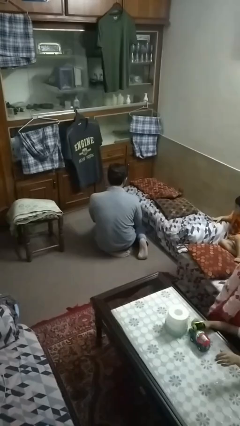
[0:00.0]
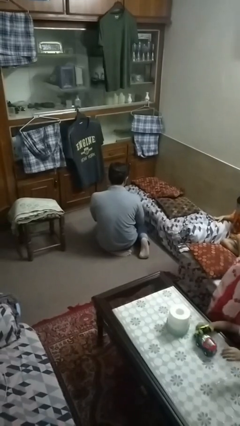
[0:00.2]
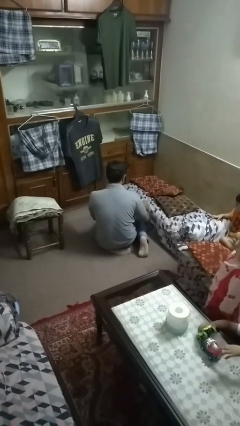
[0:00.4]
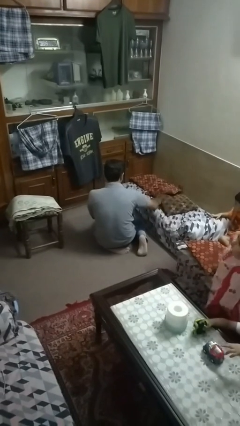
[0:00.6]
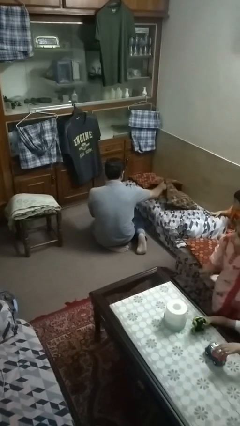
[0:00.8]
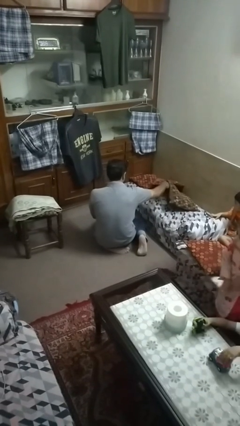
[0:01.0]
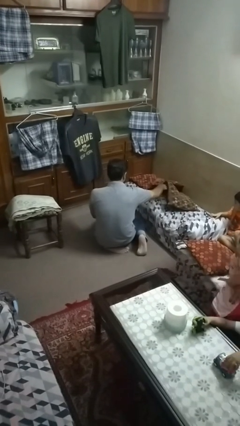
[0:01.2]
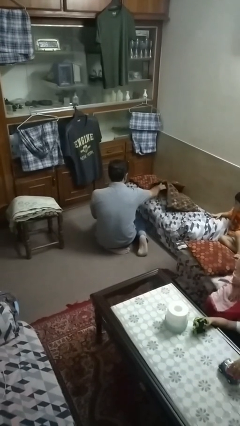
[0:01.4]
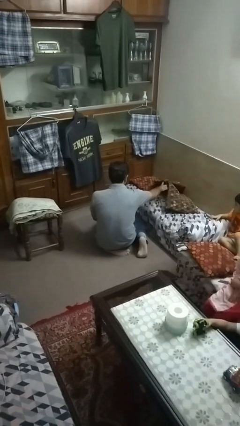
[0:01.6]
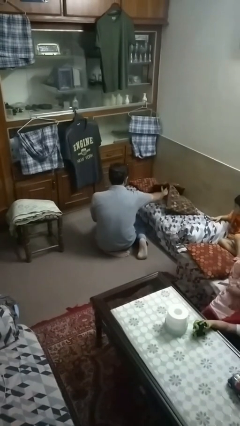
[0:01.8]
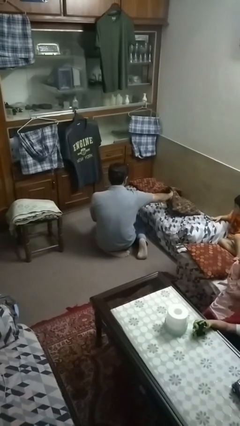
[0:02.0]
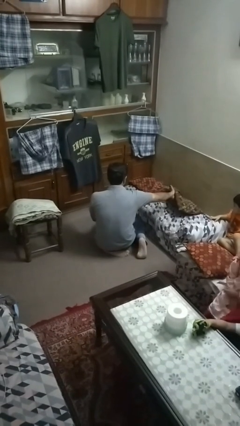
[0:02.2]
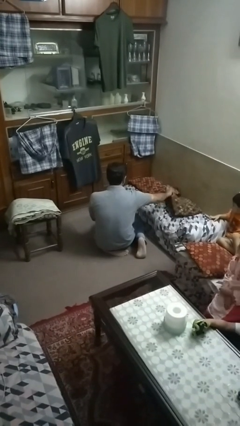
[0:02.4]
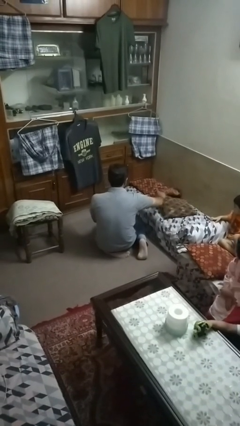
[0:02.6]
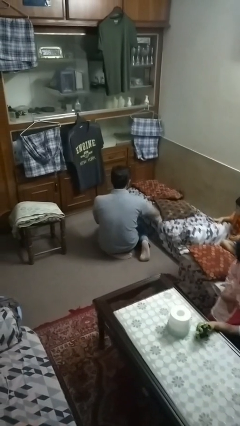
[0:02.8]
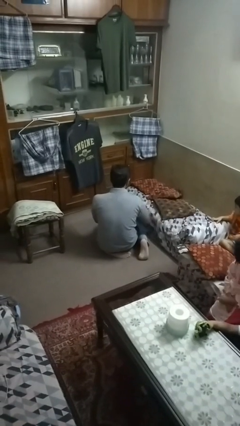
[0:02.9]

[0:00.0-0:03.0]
person searches in couch

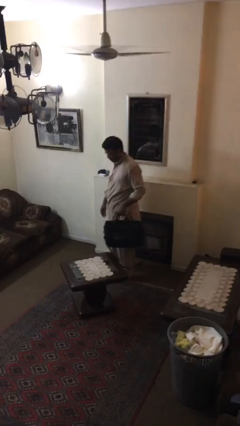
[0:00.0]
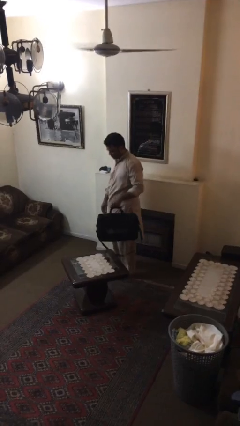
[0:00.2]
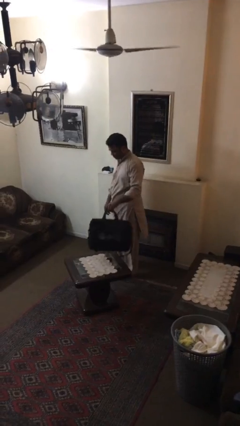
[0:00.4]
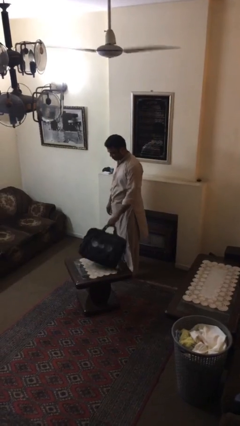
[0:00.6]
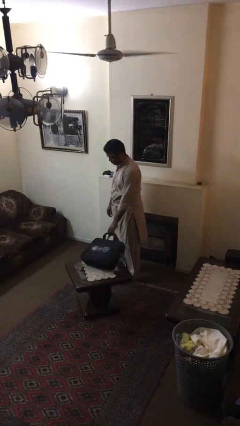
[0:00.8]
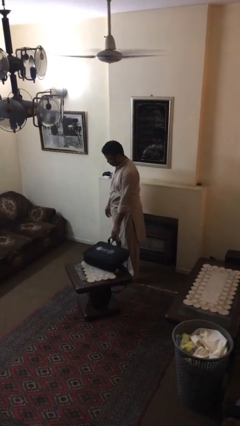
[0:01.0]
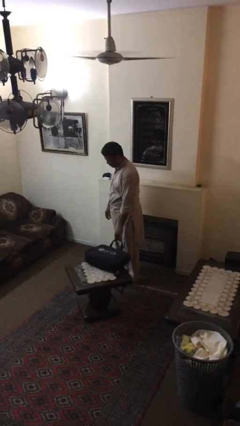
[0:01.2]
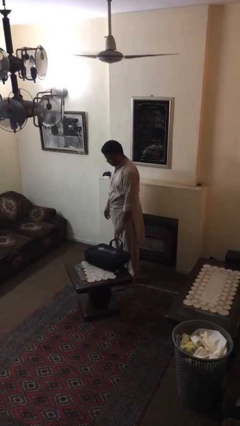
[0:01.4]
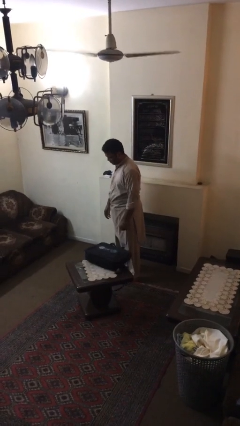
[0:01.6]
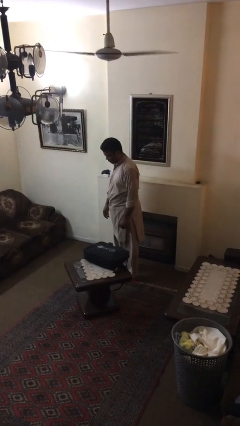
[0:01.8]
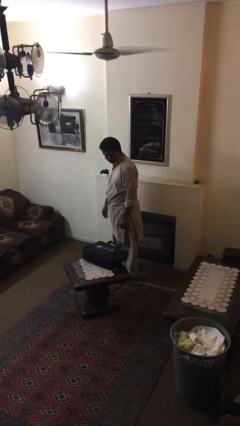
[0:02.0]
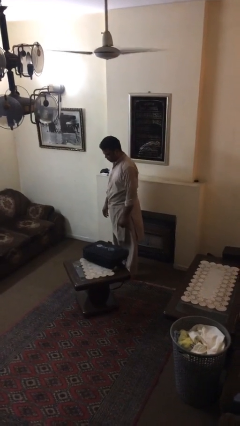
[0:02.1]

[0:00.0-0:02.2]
person puts down object on table

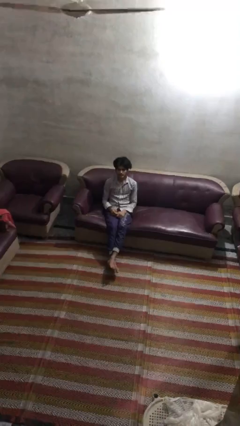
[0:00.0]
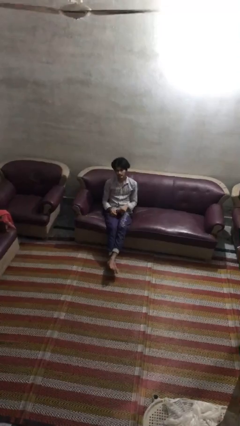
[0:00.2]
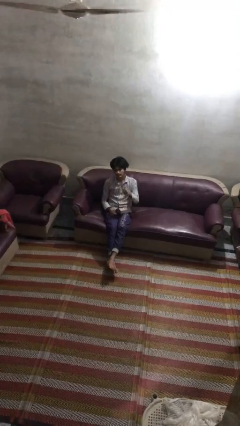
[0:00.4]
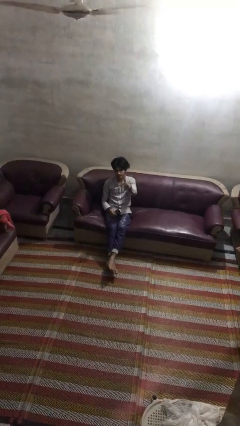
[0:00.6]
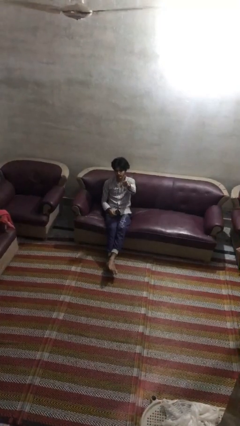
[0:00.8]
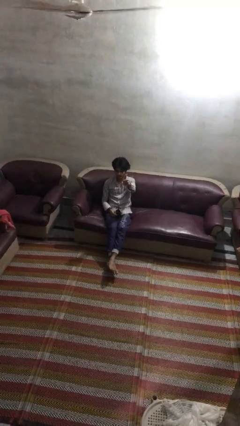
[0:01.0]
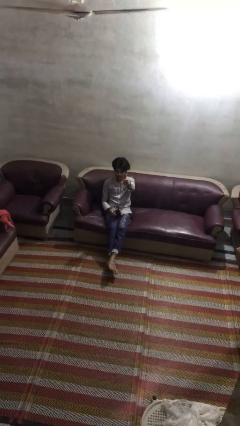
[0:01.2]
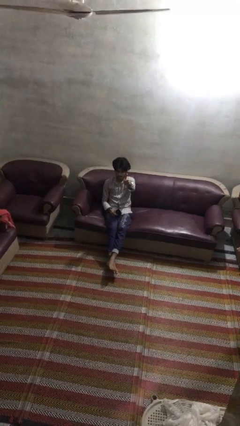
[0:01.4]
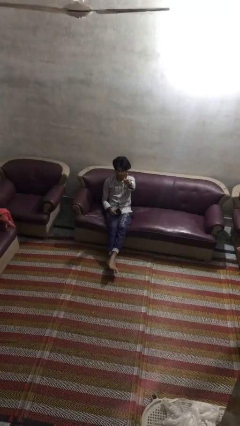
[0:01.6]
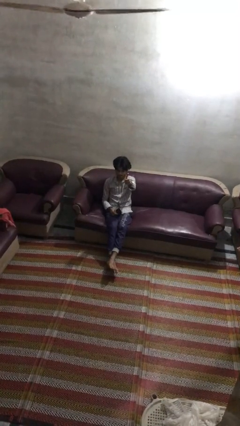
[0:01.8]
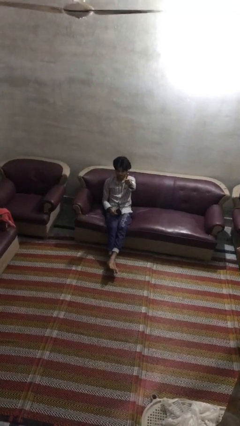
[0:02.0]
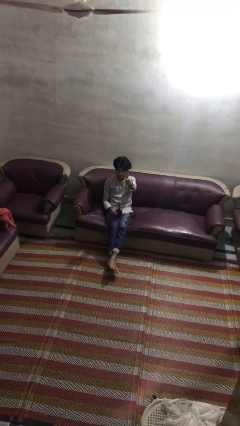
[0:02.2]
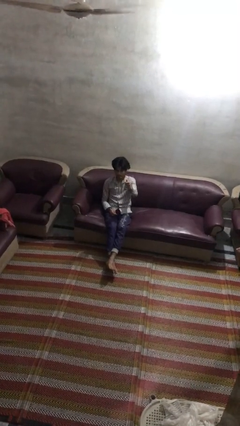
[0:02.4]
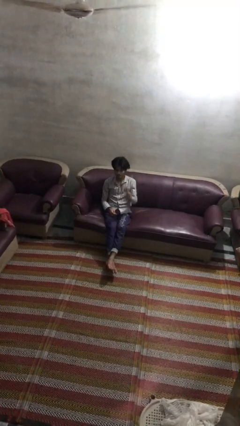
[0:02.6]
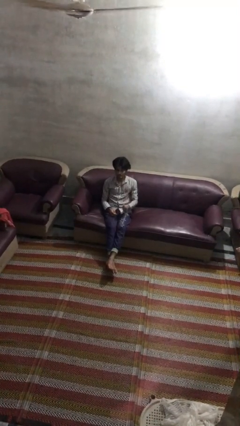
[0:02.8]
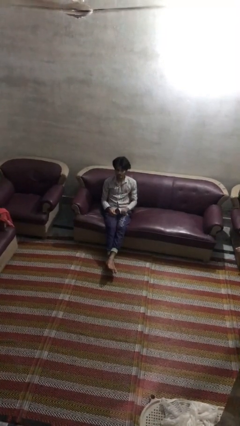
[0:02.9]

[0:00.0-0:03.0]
person gestures thumbs up

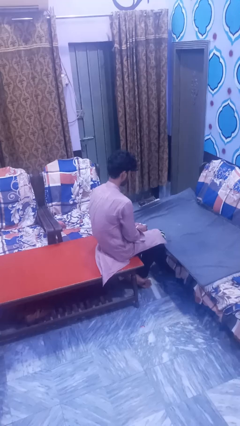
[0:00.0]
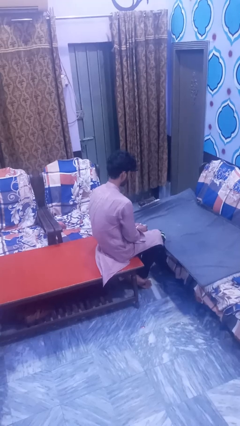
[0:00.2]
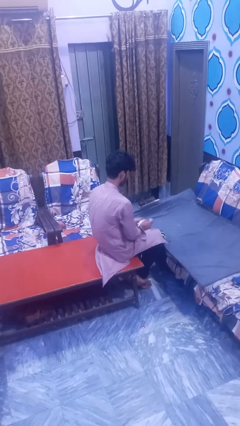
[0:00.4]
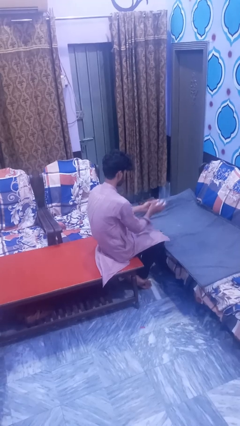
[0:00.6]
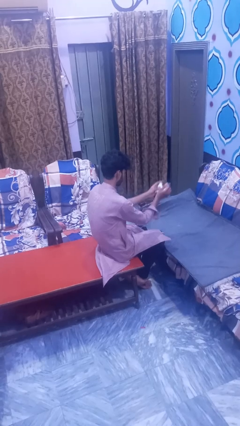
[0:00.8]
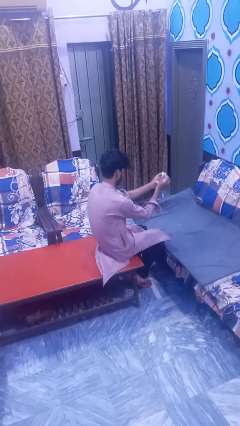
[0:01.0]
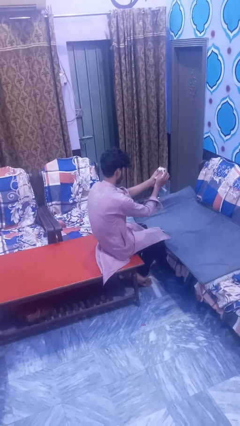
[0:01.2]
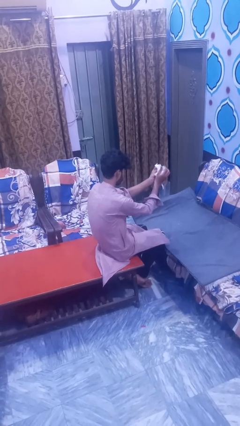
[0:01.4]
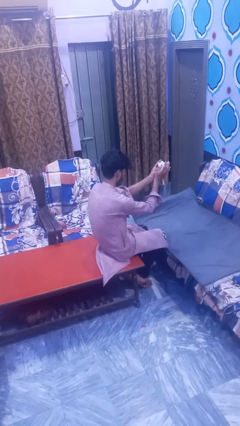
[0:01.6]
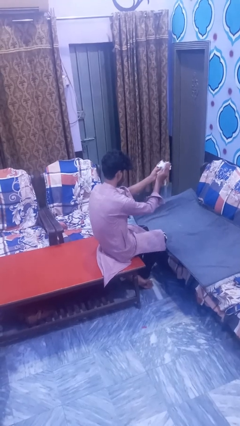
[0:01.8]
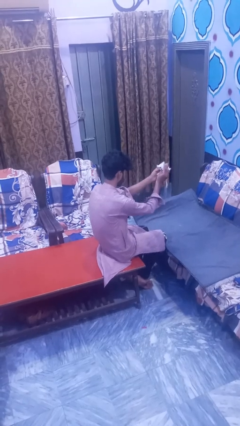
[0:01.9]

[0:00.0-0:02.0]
person crumples paper

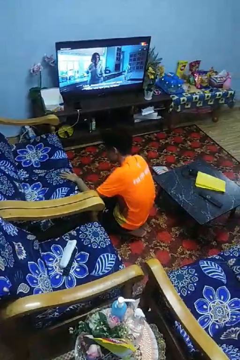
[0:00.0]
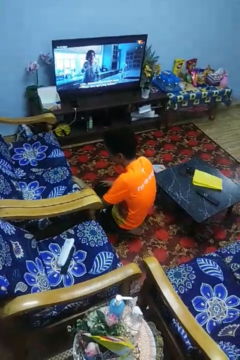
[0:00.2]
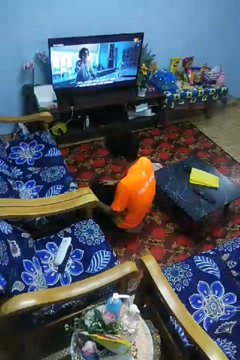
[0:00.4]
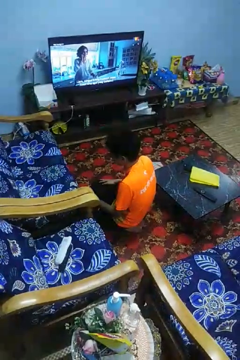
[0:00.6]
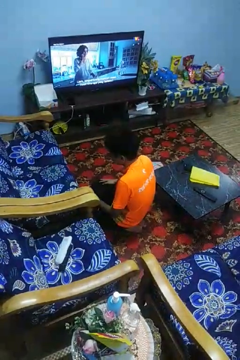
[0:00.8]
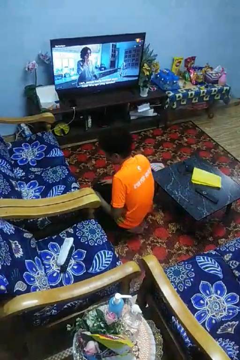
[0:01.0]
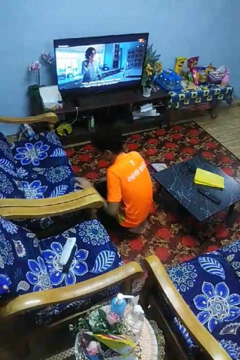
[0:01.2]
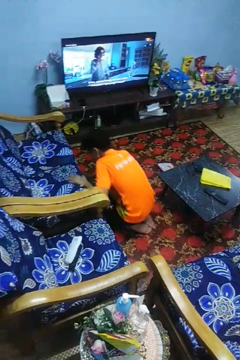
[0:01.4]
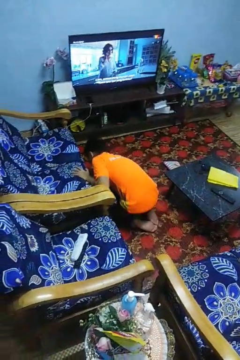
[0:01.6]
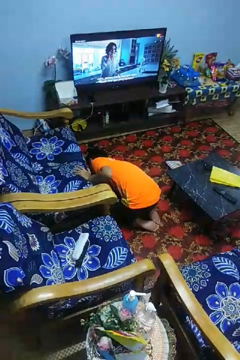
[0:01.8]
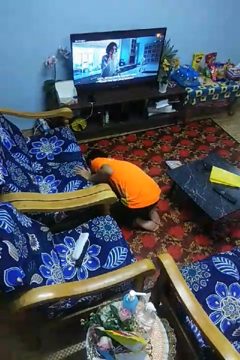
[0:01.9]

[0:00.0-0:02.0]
person searches under couch

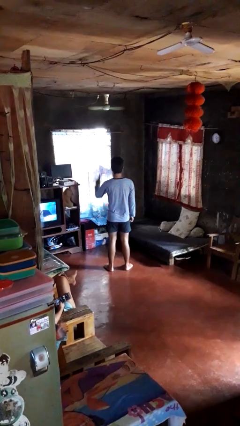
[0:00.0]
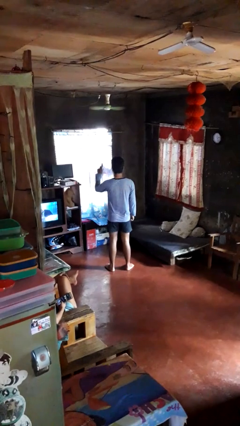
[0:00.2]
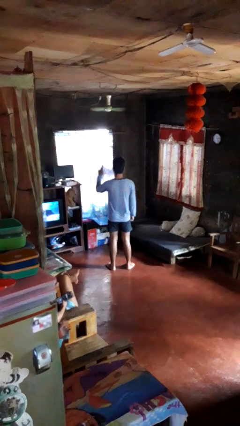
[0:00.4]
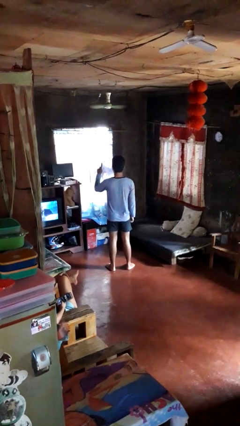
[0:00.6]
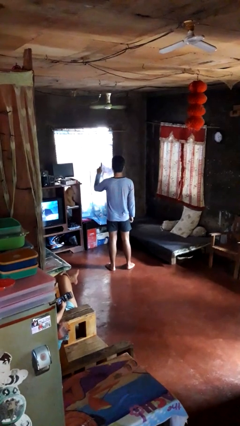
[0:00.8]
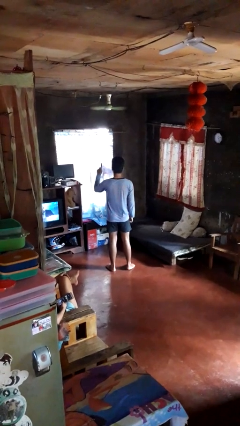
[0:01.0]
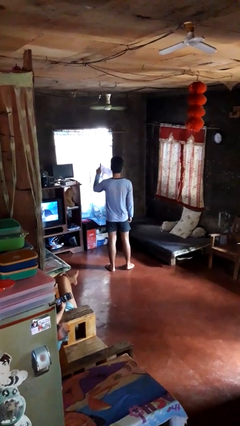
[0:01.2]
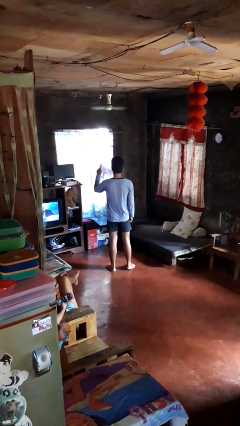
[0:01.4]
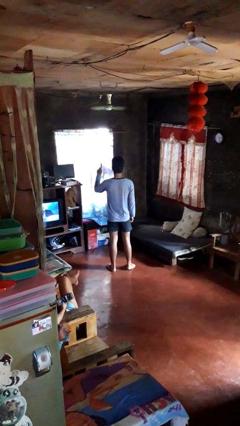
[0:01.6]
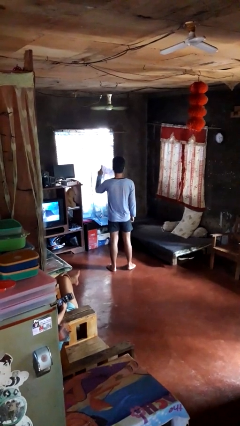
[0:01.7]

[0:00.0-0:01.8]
person gestures number one

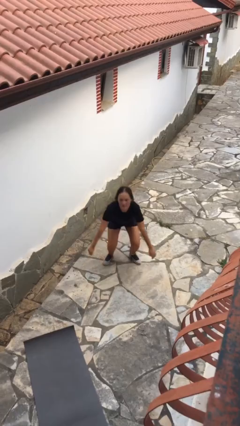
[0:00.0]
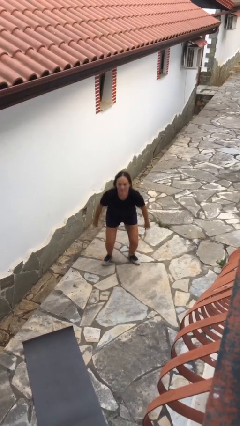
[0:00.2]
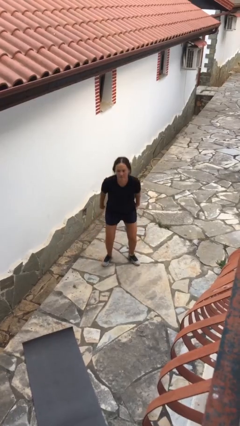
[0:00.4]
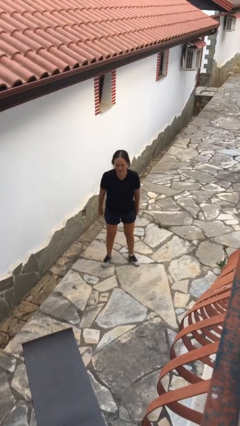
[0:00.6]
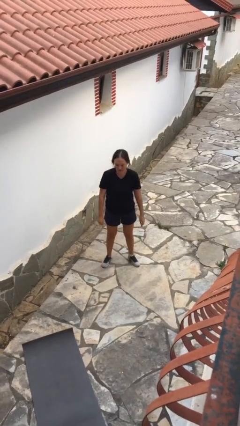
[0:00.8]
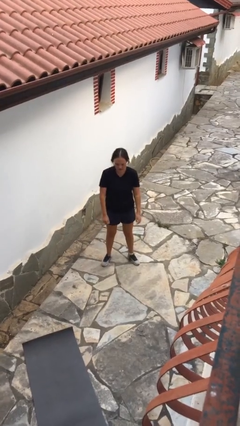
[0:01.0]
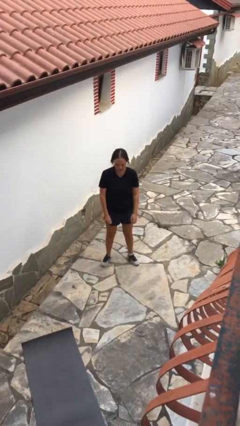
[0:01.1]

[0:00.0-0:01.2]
person stands up

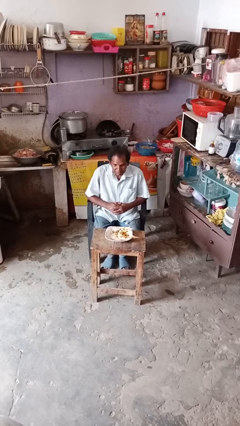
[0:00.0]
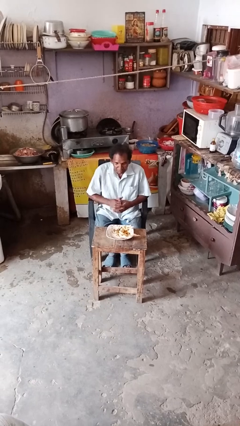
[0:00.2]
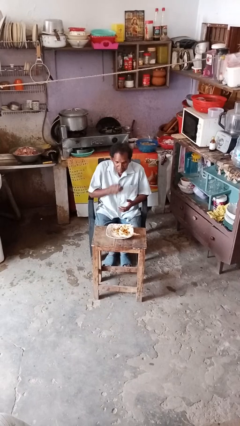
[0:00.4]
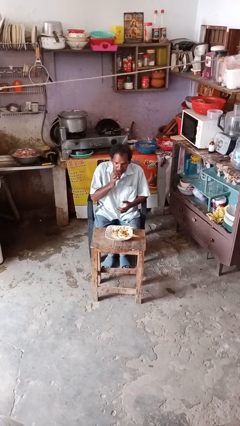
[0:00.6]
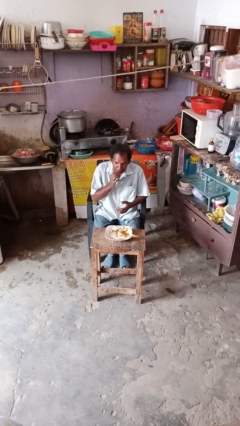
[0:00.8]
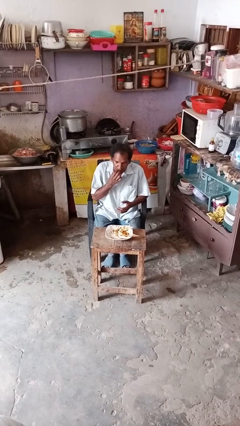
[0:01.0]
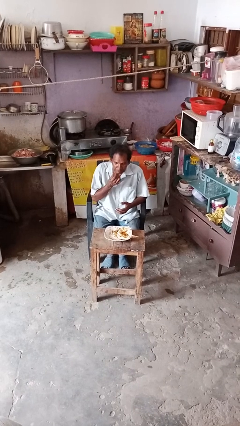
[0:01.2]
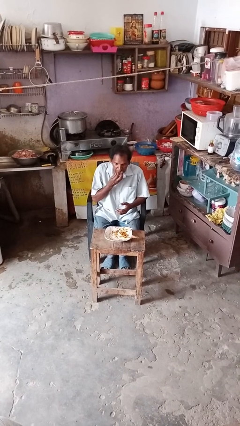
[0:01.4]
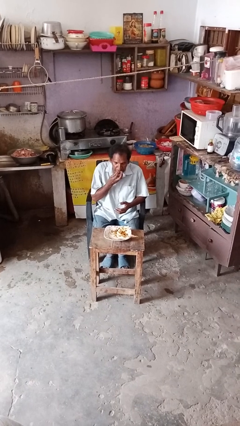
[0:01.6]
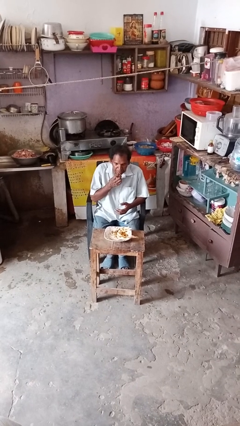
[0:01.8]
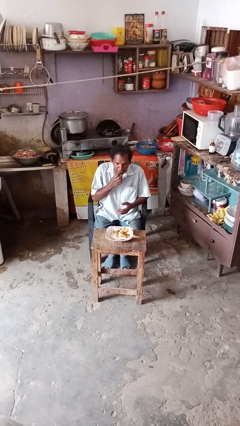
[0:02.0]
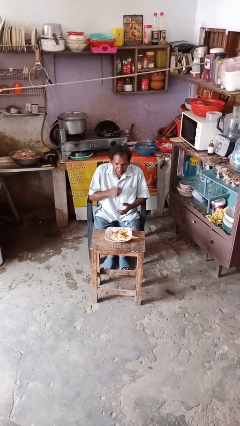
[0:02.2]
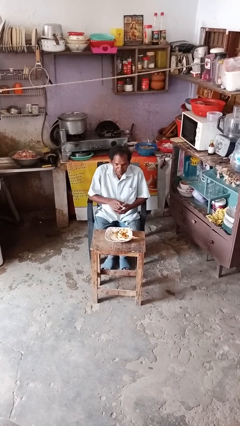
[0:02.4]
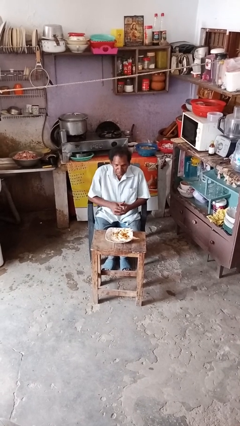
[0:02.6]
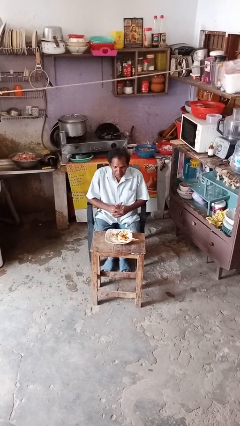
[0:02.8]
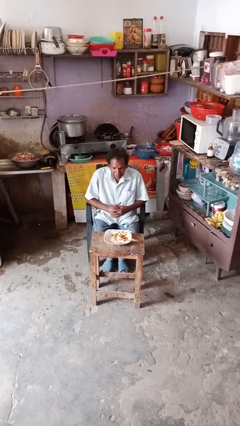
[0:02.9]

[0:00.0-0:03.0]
person licks fingers
